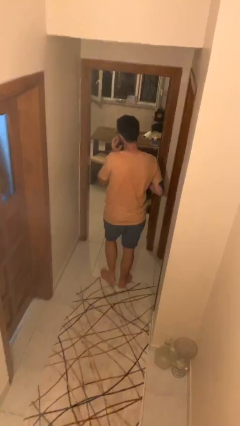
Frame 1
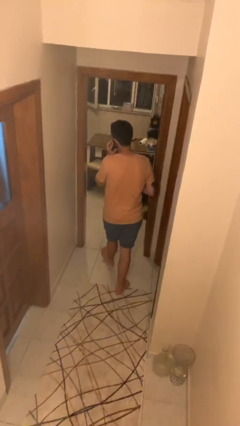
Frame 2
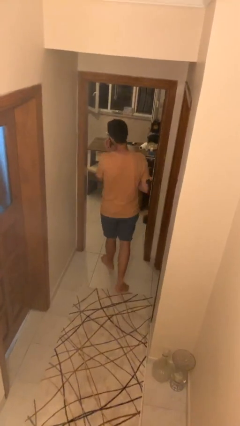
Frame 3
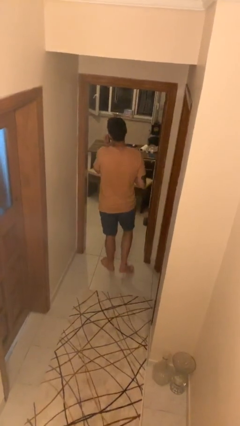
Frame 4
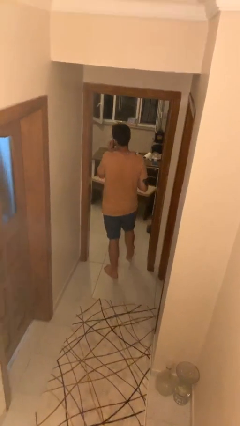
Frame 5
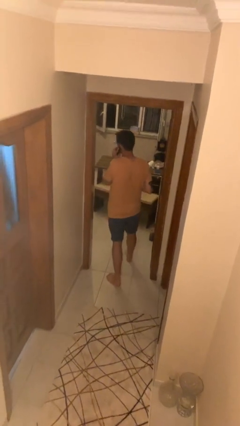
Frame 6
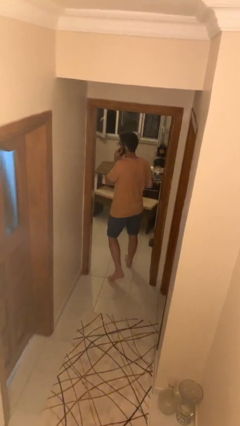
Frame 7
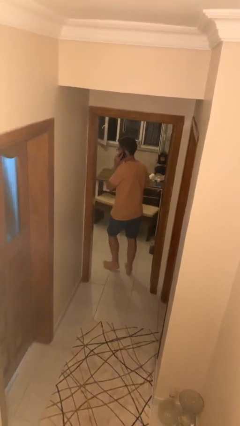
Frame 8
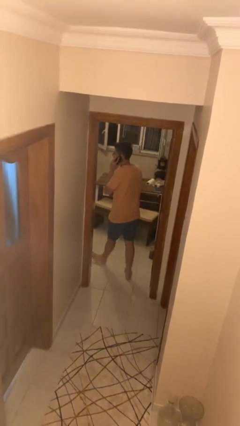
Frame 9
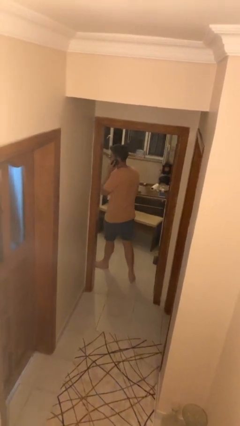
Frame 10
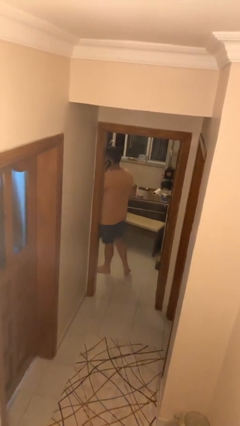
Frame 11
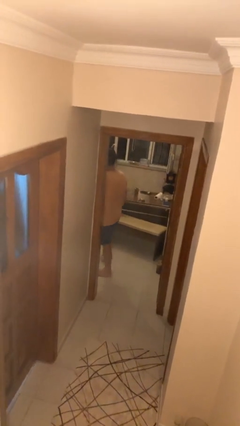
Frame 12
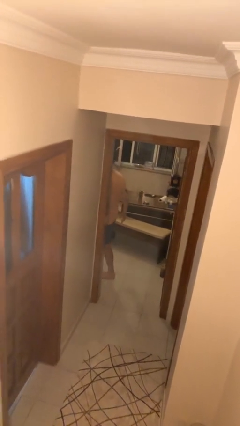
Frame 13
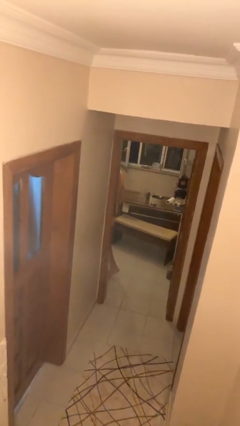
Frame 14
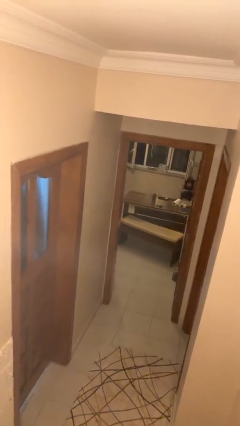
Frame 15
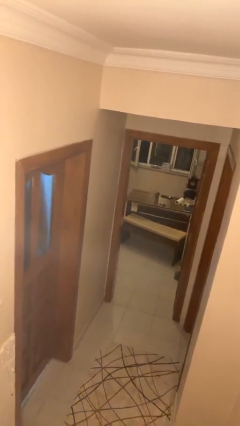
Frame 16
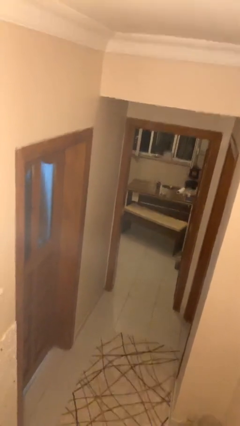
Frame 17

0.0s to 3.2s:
person exits scene through structure

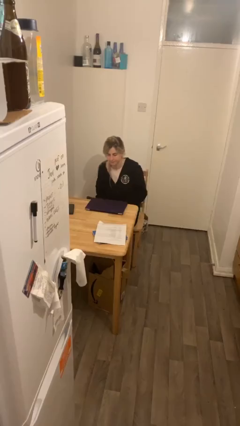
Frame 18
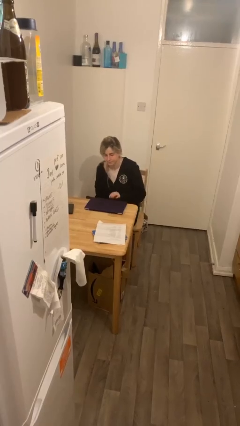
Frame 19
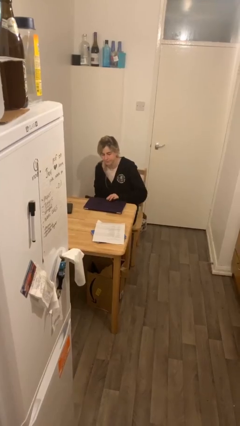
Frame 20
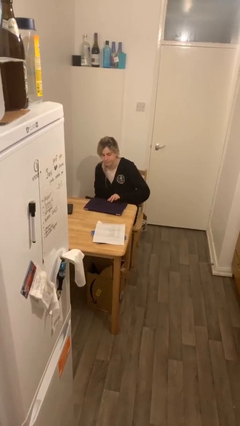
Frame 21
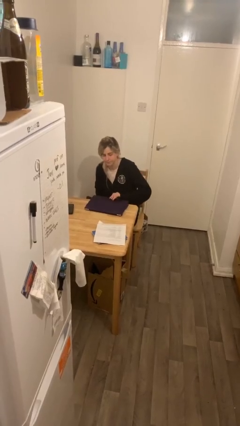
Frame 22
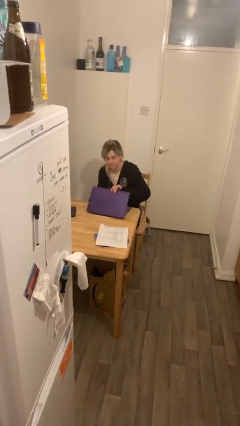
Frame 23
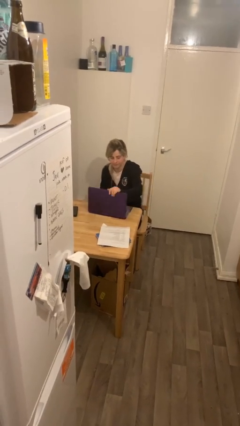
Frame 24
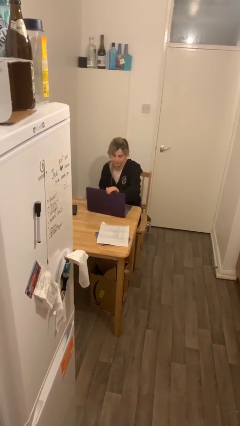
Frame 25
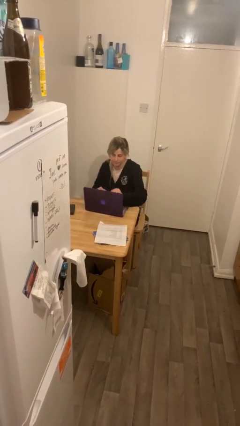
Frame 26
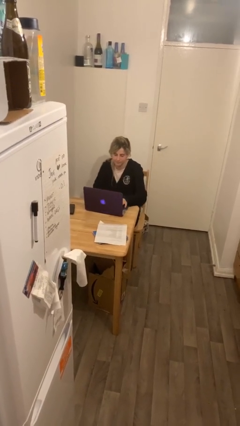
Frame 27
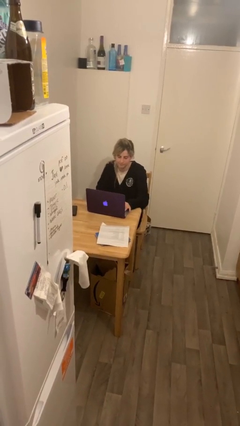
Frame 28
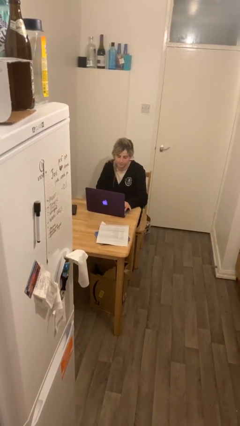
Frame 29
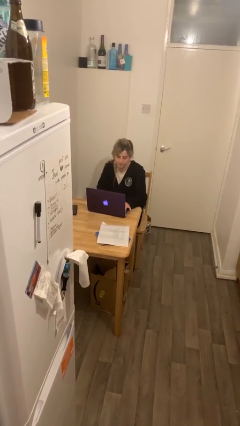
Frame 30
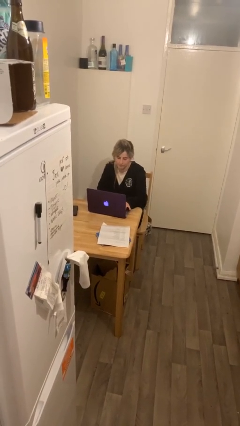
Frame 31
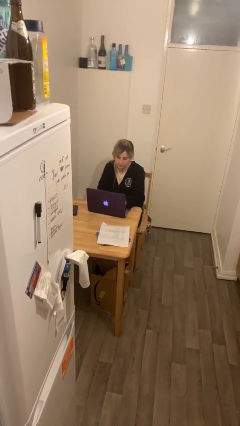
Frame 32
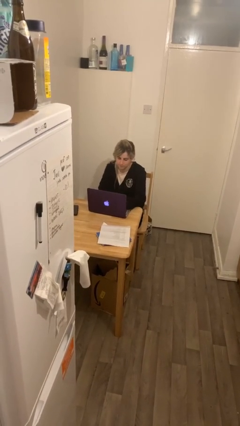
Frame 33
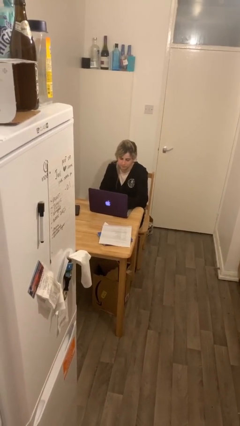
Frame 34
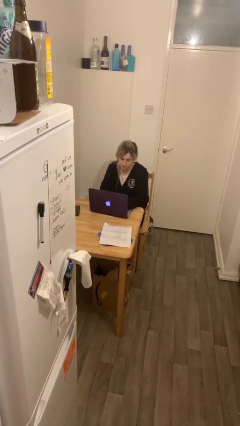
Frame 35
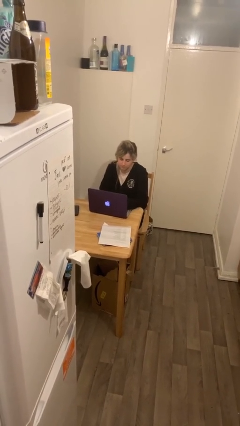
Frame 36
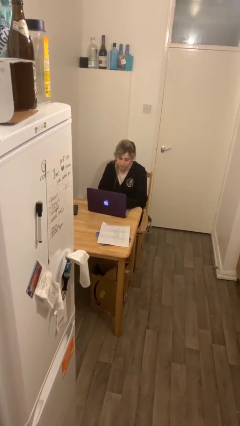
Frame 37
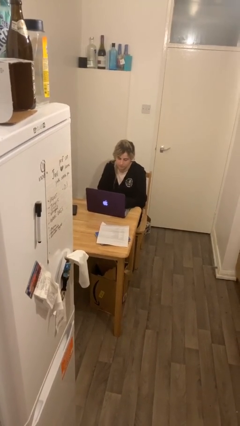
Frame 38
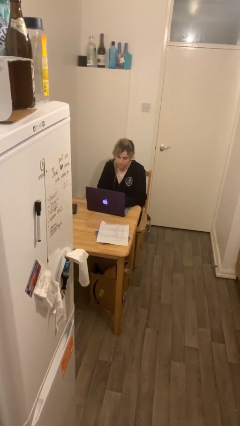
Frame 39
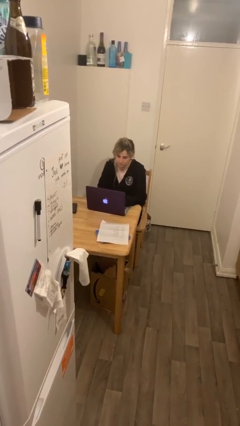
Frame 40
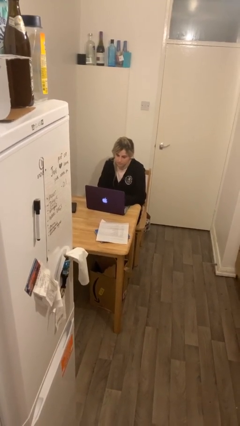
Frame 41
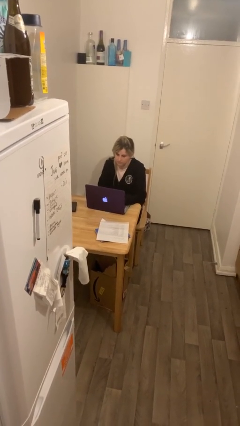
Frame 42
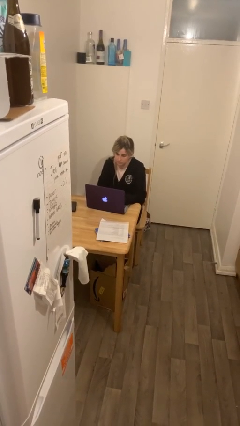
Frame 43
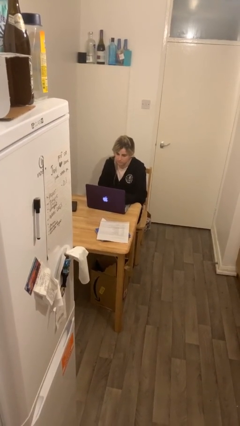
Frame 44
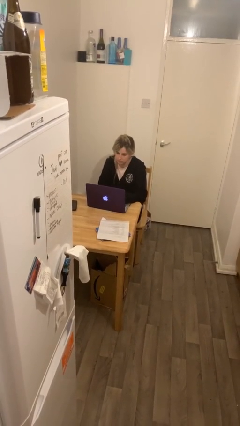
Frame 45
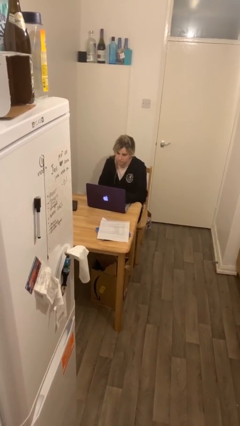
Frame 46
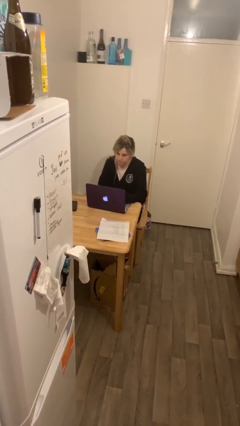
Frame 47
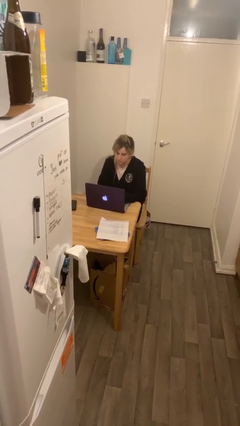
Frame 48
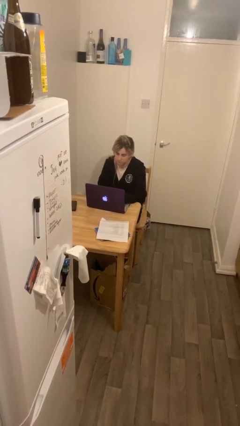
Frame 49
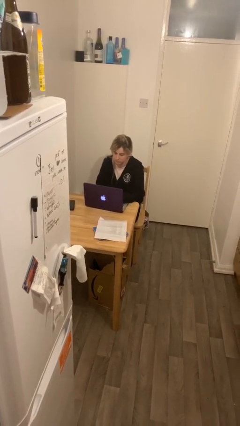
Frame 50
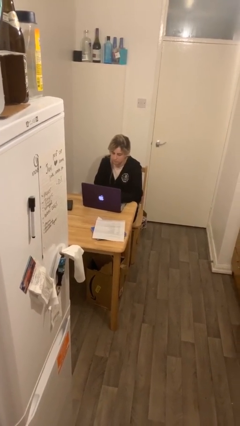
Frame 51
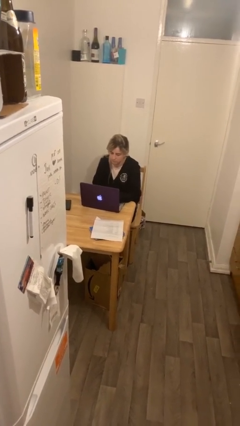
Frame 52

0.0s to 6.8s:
person interacts with laptop

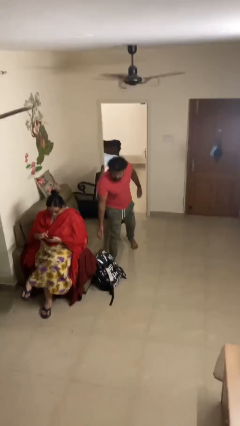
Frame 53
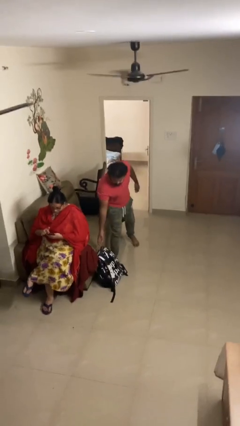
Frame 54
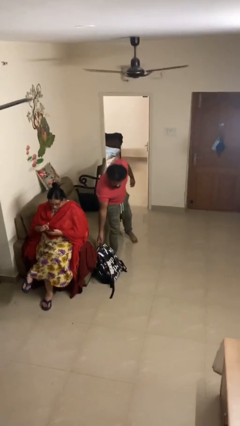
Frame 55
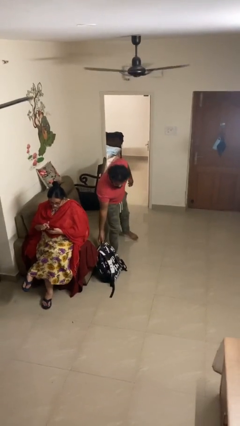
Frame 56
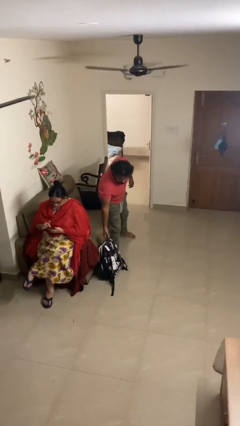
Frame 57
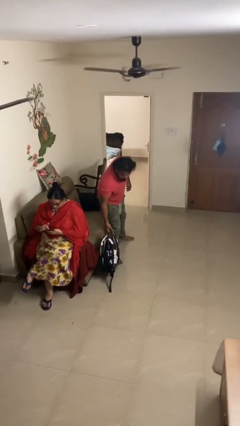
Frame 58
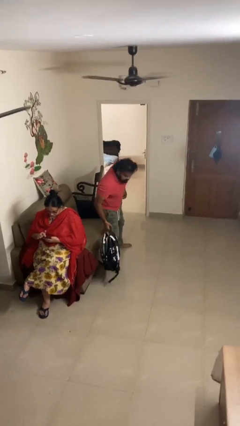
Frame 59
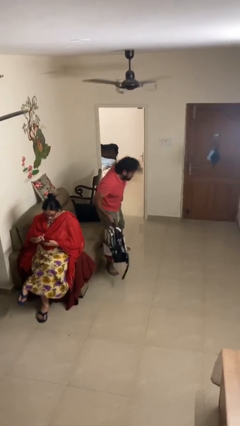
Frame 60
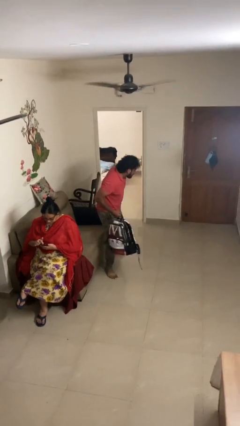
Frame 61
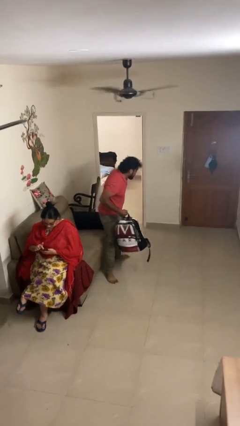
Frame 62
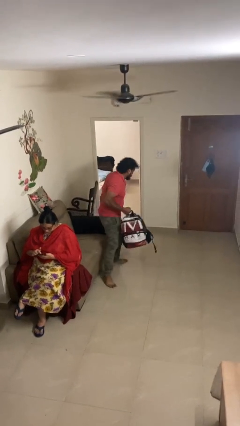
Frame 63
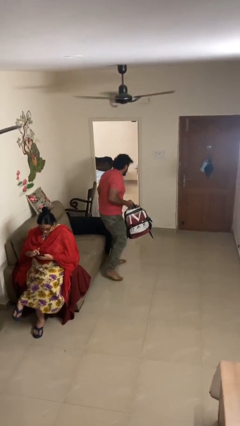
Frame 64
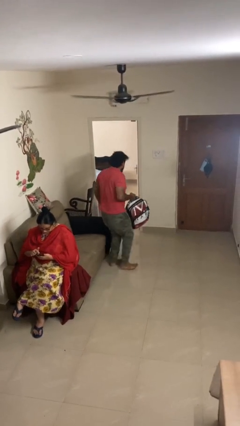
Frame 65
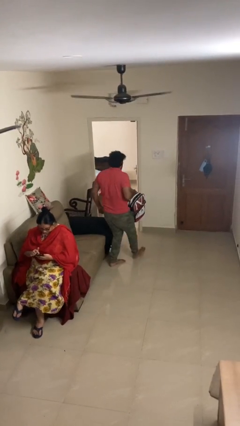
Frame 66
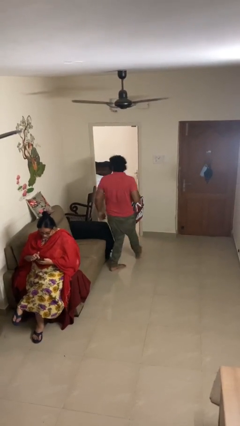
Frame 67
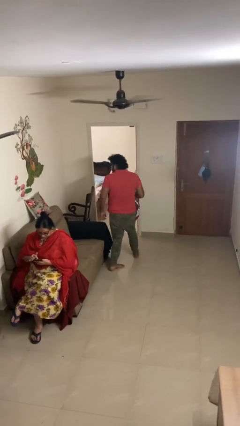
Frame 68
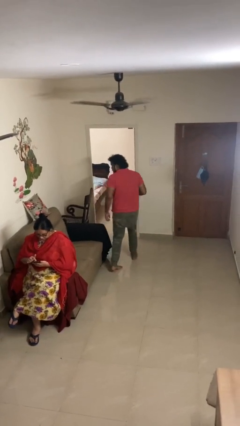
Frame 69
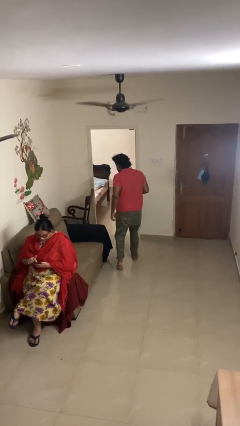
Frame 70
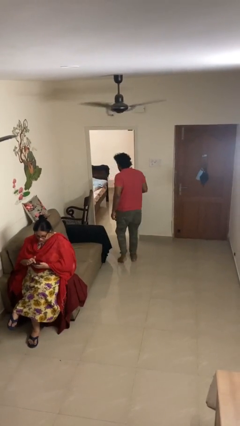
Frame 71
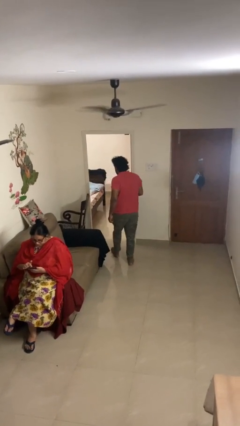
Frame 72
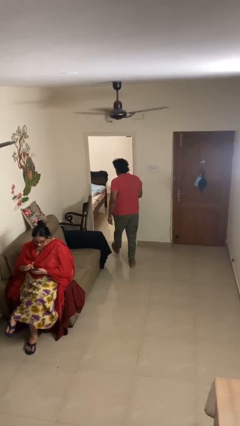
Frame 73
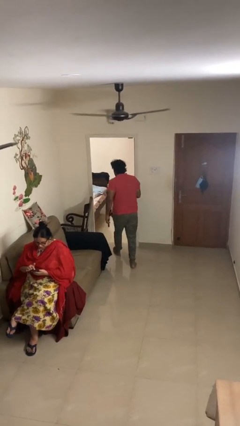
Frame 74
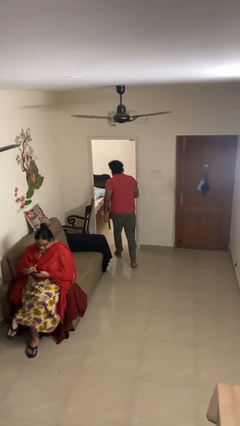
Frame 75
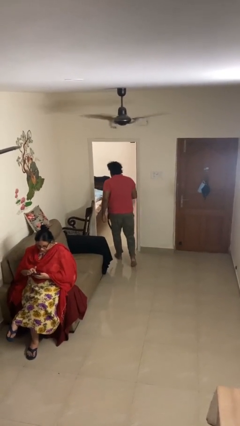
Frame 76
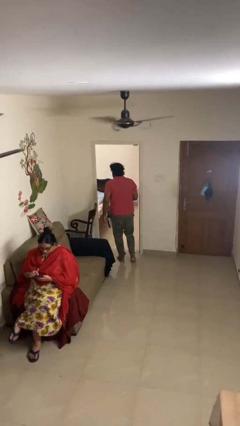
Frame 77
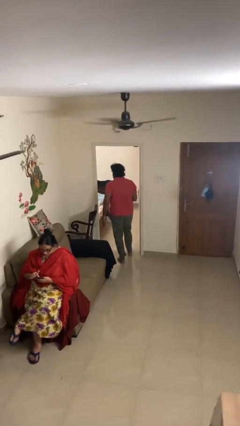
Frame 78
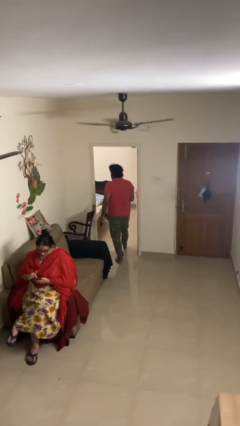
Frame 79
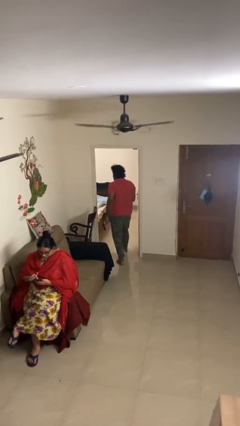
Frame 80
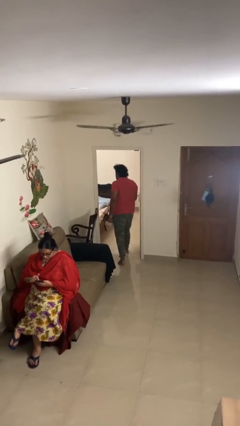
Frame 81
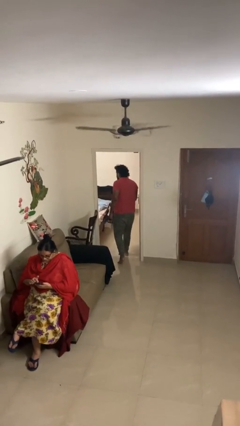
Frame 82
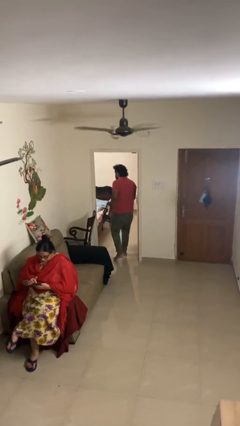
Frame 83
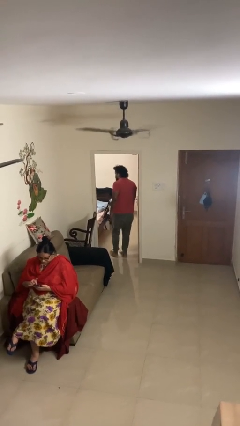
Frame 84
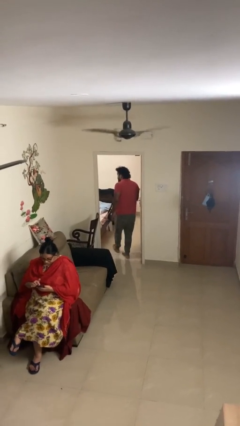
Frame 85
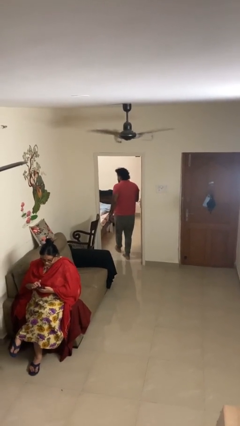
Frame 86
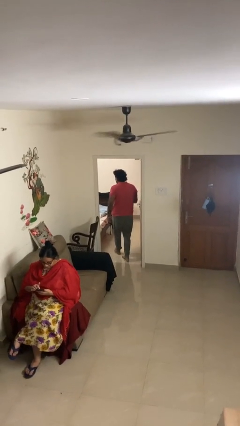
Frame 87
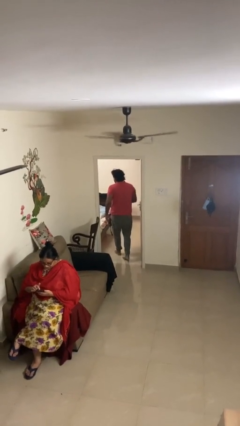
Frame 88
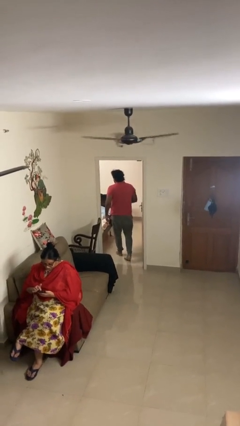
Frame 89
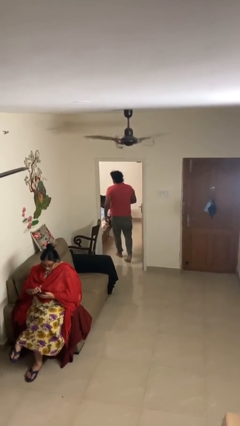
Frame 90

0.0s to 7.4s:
person steals object from person

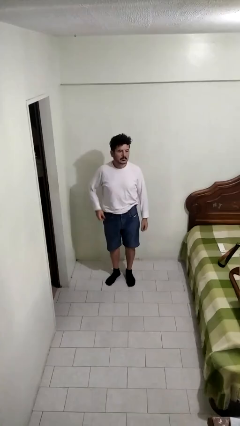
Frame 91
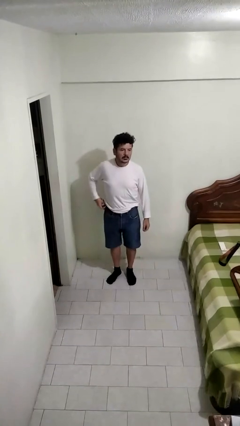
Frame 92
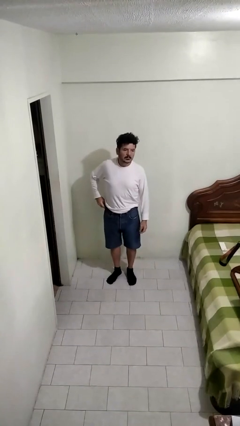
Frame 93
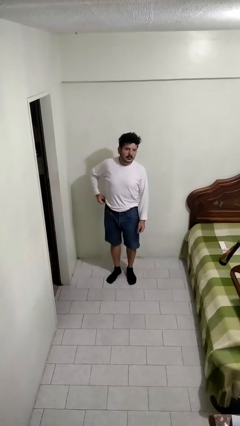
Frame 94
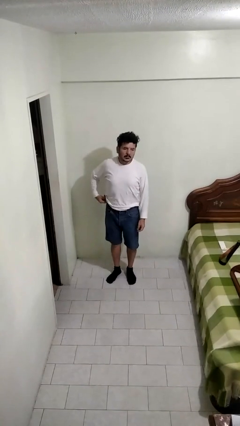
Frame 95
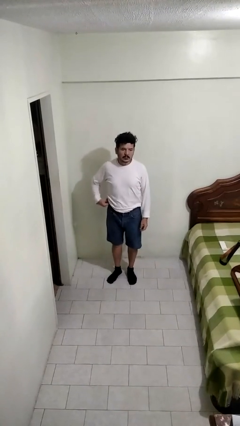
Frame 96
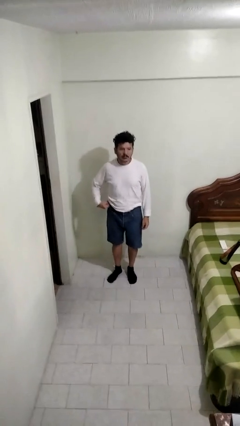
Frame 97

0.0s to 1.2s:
person hikes up pants
